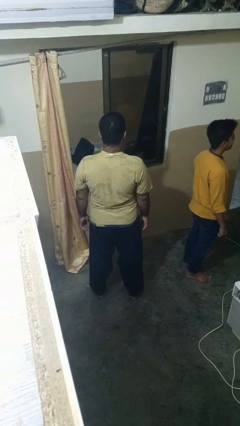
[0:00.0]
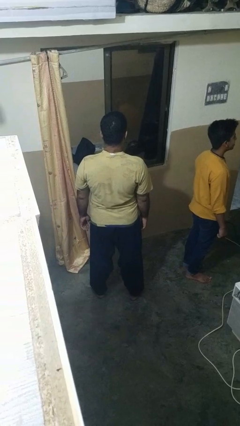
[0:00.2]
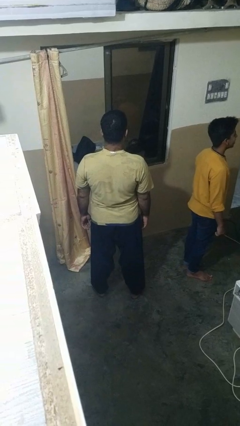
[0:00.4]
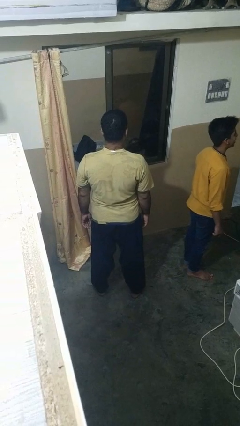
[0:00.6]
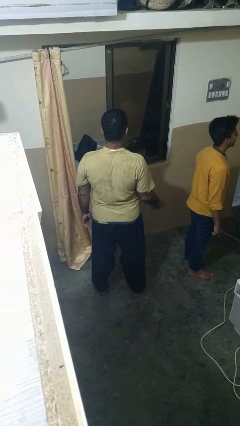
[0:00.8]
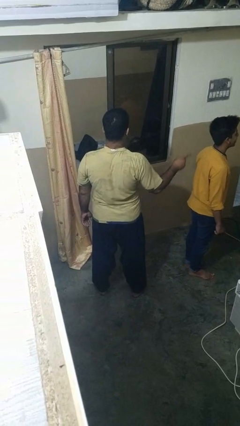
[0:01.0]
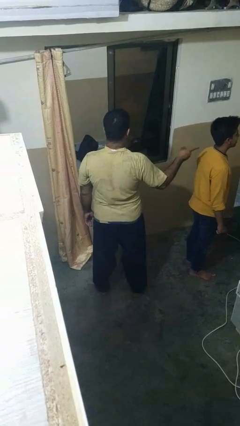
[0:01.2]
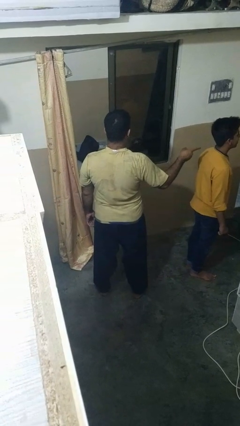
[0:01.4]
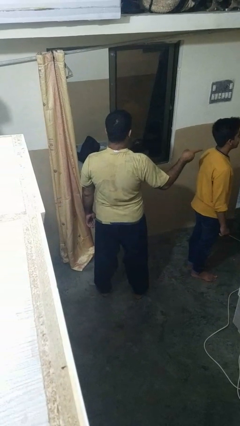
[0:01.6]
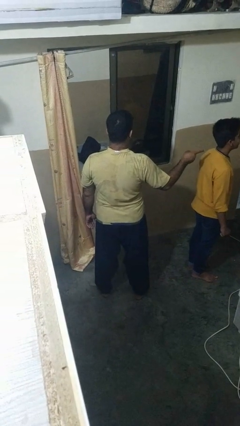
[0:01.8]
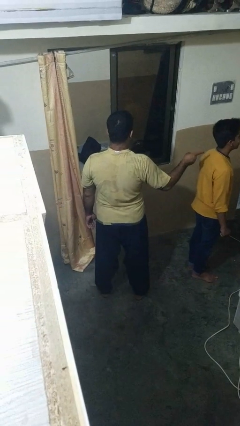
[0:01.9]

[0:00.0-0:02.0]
person points at person

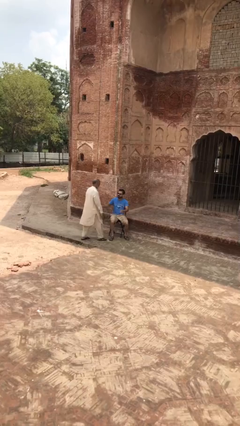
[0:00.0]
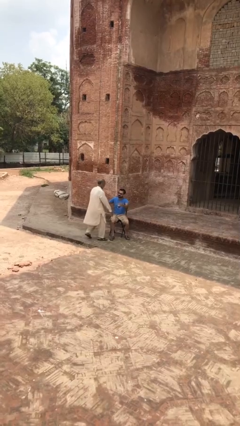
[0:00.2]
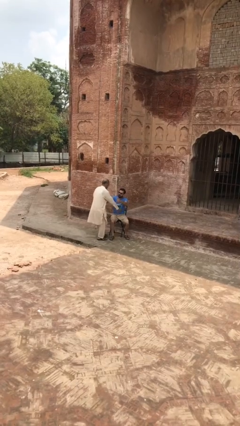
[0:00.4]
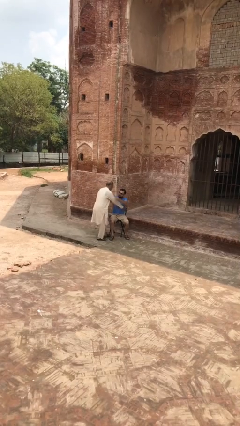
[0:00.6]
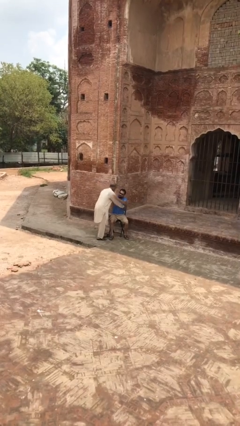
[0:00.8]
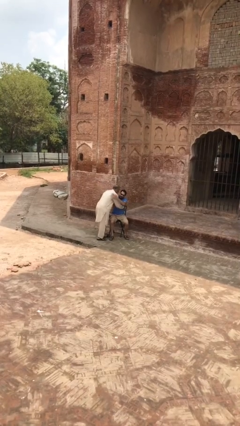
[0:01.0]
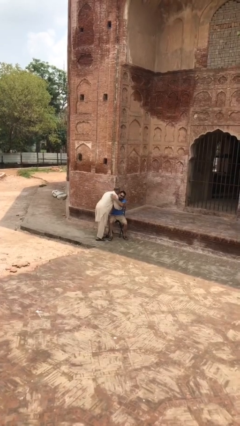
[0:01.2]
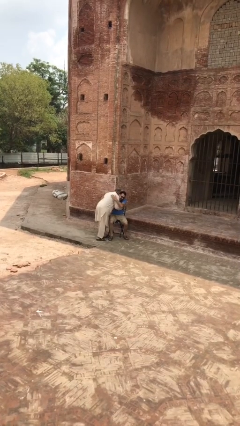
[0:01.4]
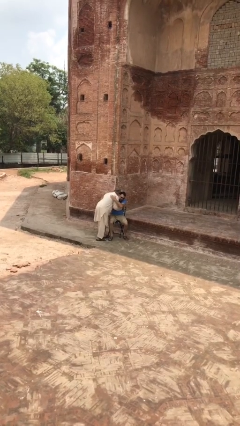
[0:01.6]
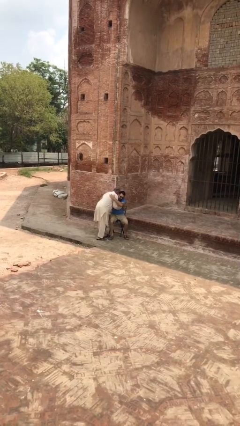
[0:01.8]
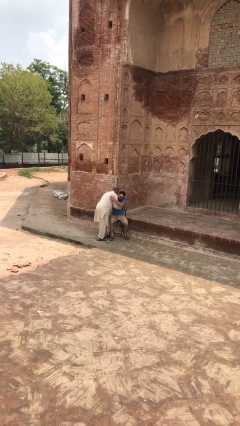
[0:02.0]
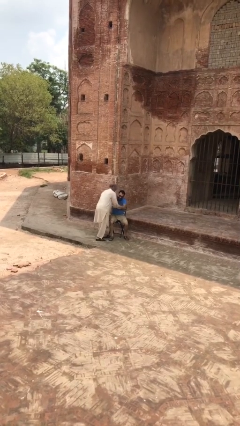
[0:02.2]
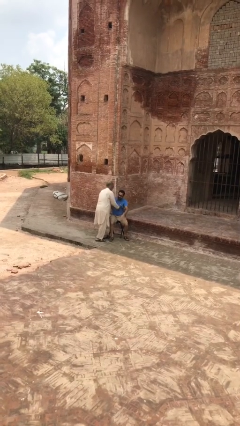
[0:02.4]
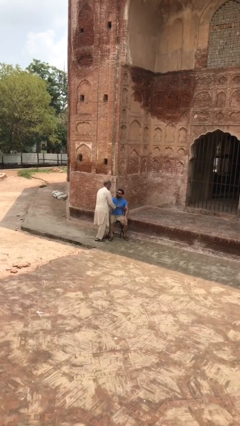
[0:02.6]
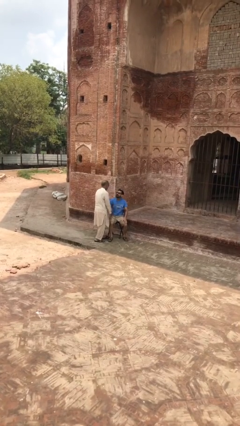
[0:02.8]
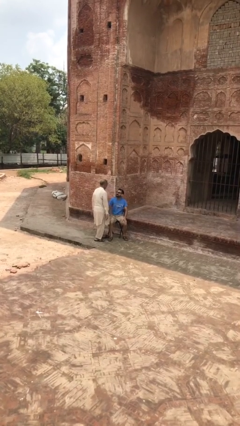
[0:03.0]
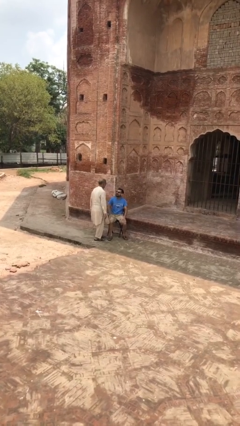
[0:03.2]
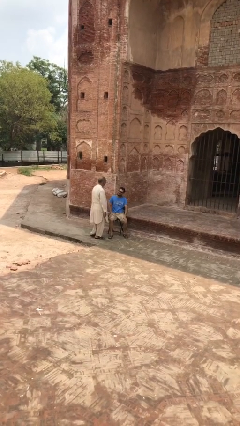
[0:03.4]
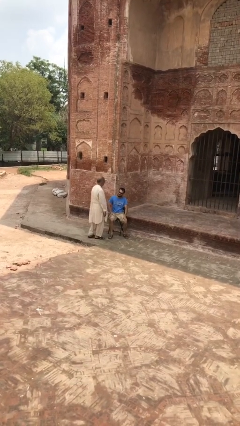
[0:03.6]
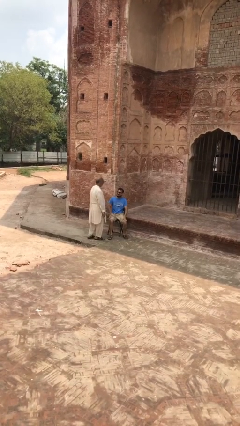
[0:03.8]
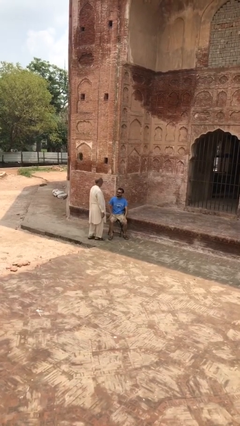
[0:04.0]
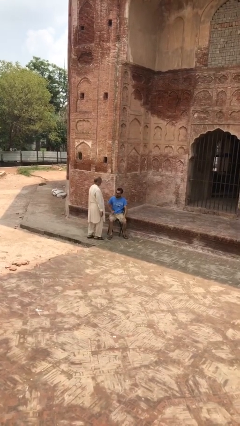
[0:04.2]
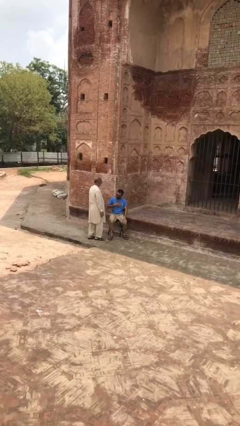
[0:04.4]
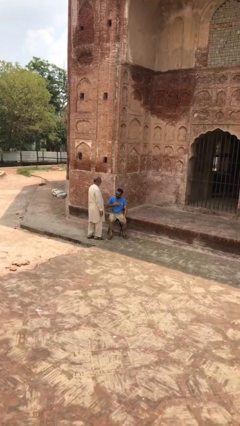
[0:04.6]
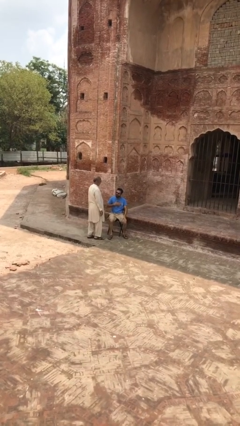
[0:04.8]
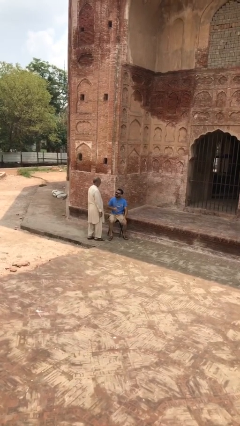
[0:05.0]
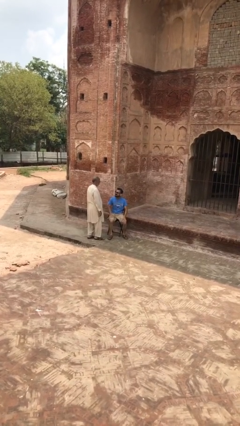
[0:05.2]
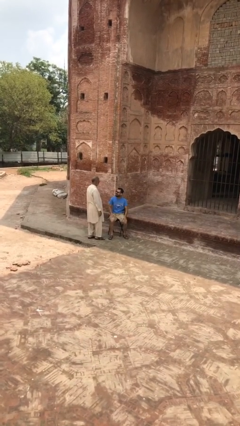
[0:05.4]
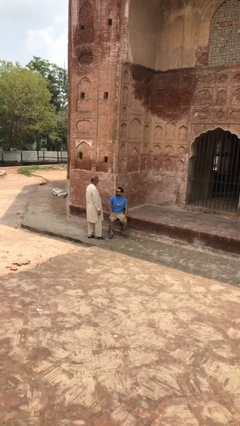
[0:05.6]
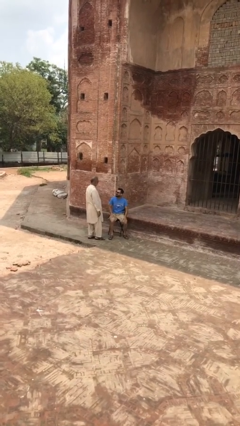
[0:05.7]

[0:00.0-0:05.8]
person embraces person

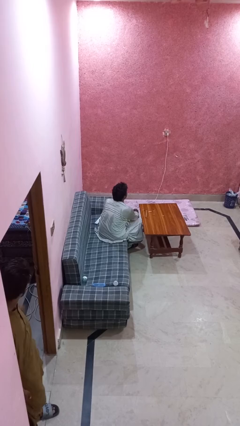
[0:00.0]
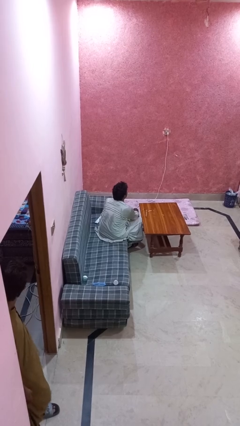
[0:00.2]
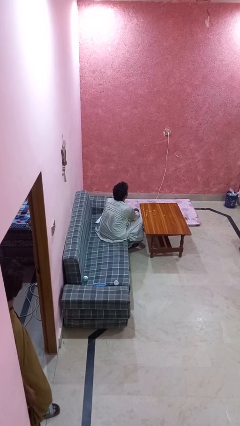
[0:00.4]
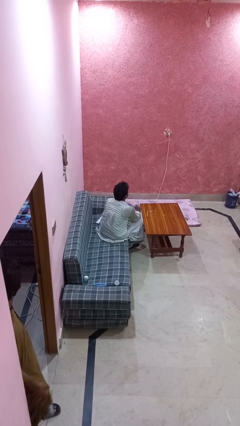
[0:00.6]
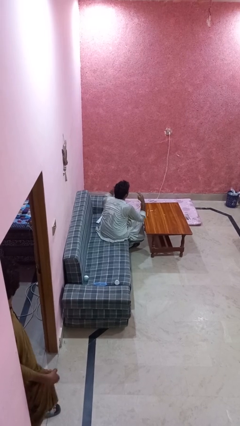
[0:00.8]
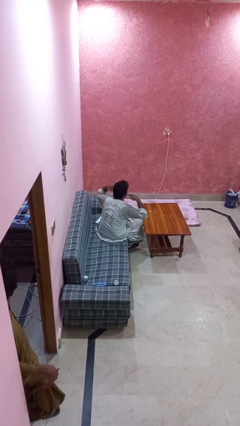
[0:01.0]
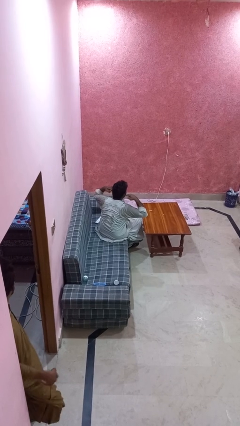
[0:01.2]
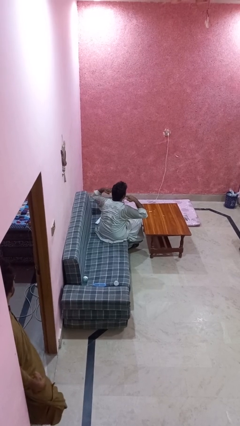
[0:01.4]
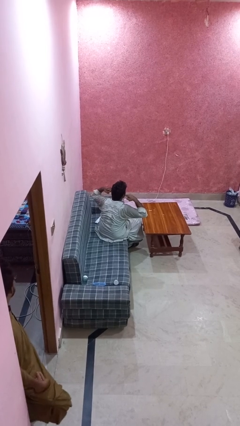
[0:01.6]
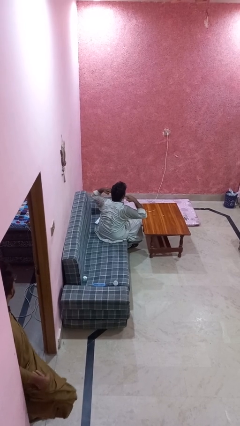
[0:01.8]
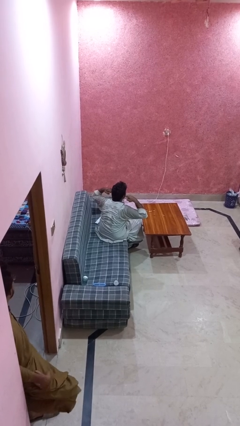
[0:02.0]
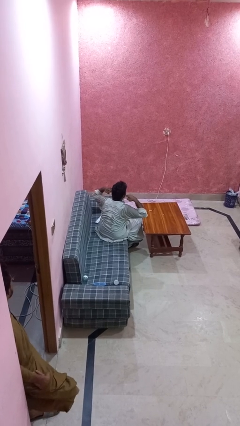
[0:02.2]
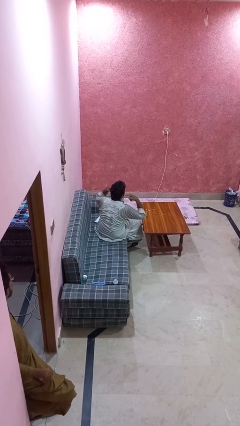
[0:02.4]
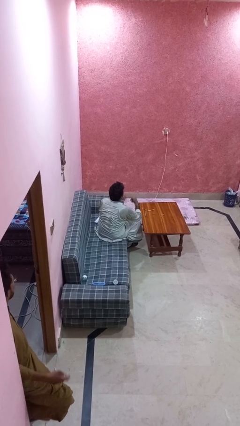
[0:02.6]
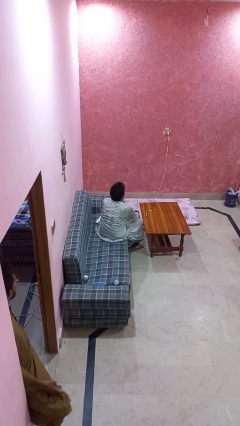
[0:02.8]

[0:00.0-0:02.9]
person puts fingers in ear

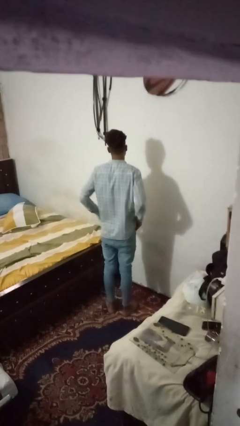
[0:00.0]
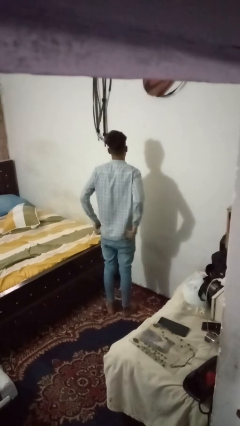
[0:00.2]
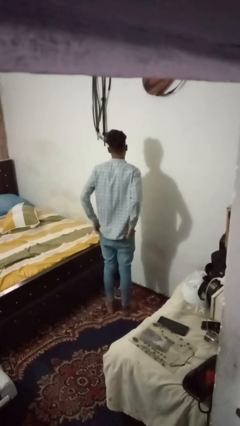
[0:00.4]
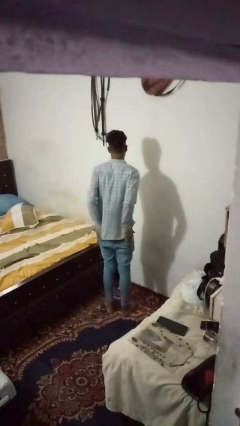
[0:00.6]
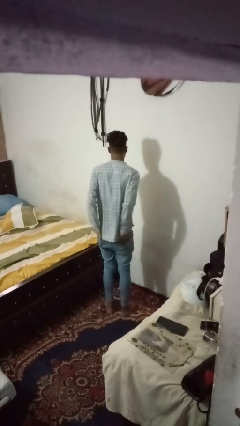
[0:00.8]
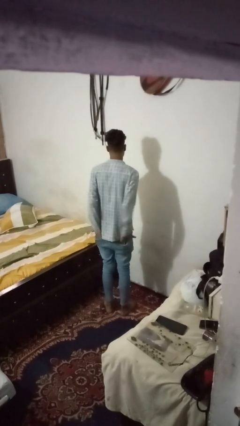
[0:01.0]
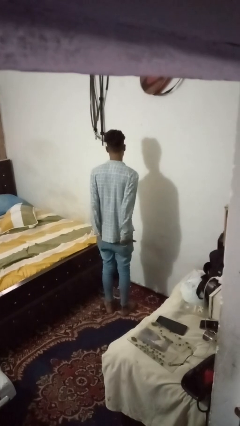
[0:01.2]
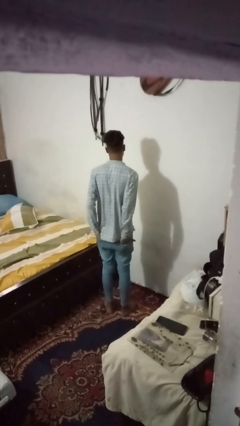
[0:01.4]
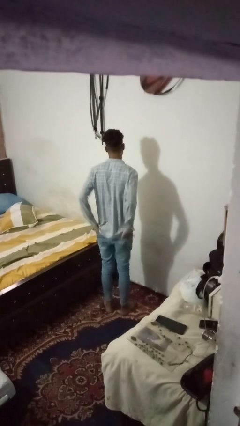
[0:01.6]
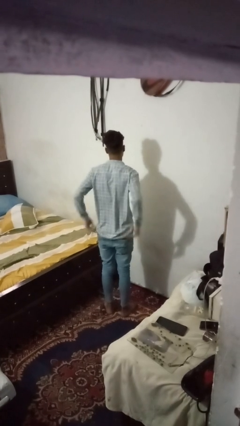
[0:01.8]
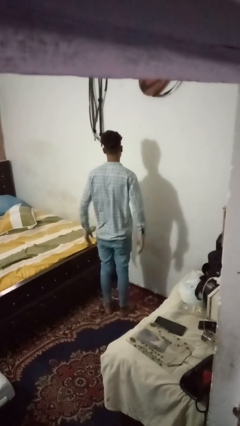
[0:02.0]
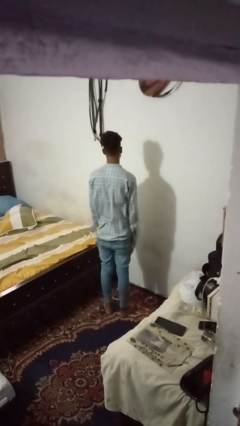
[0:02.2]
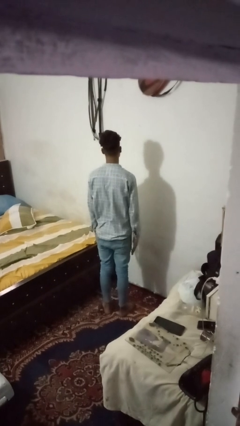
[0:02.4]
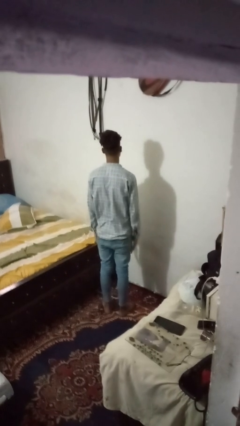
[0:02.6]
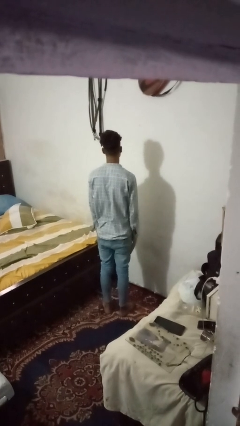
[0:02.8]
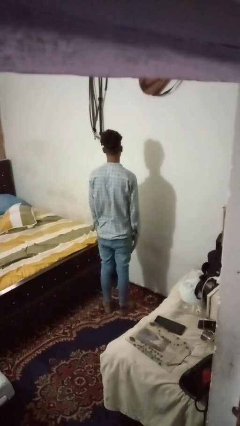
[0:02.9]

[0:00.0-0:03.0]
person puts hands in back pockets
